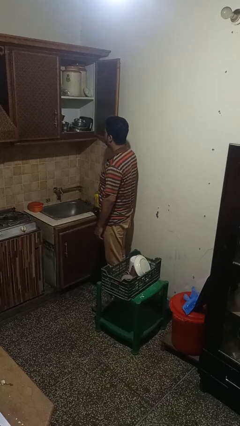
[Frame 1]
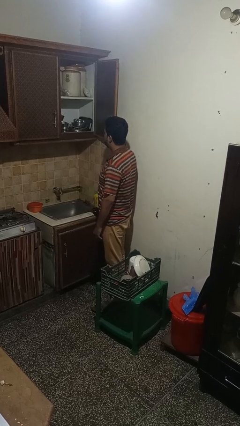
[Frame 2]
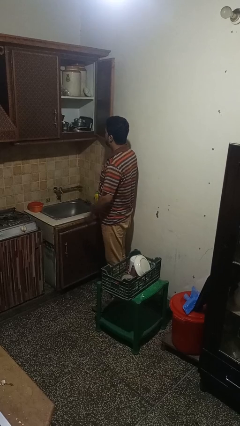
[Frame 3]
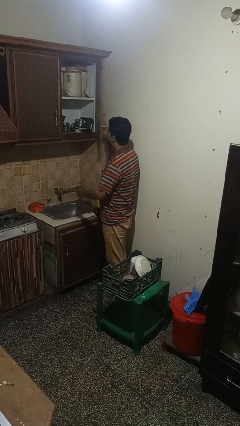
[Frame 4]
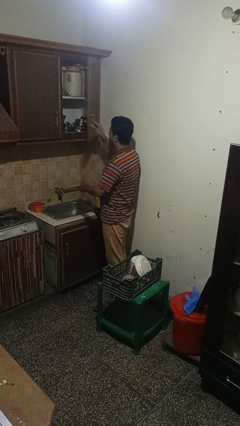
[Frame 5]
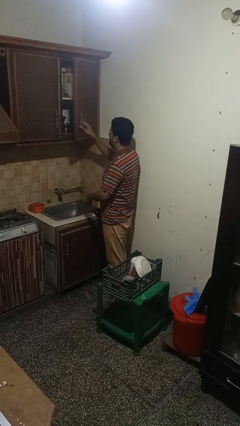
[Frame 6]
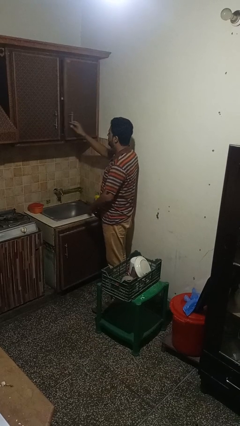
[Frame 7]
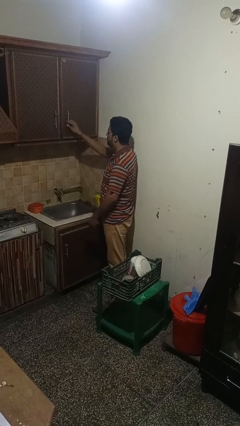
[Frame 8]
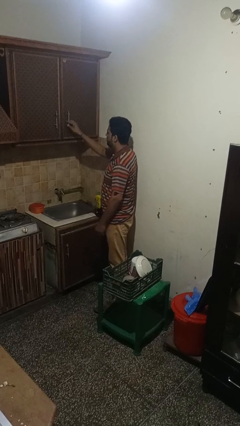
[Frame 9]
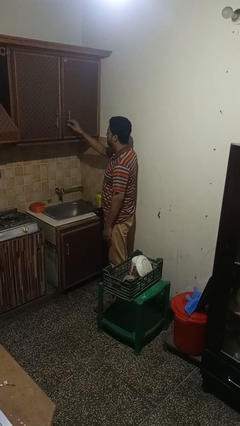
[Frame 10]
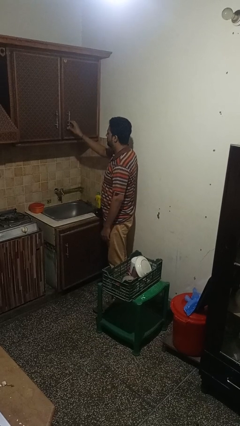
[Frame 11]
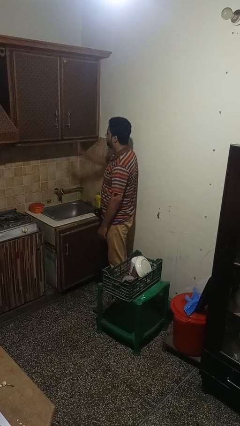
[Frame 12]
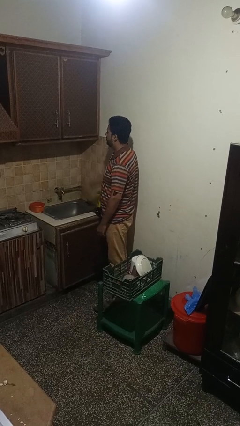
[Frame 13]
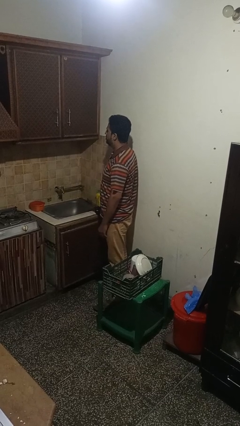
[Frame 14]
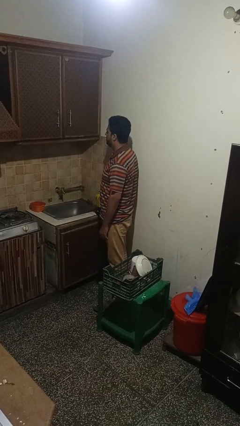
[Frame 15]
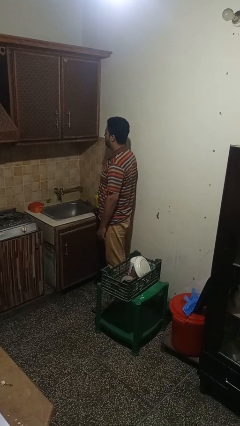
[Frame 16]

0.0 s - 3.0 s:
person closes cabinet

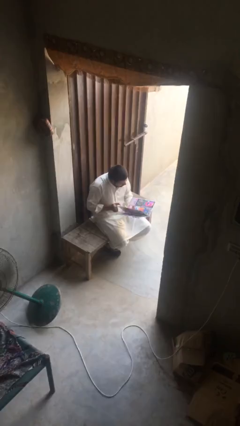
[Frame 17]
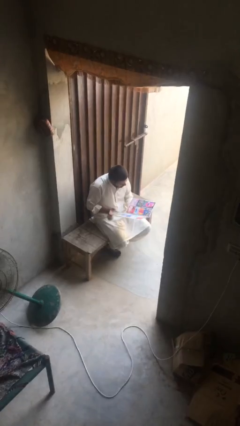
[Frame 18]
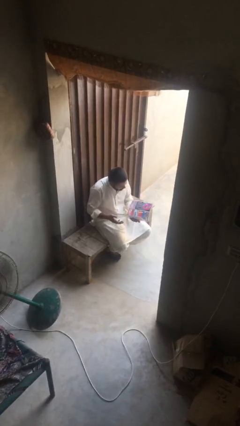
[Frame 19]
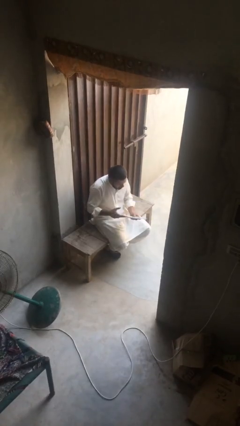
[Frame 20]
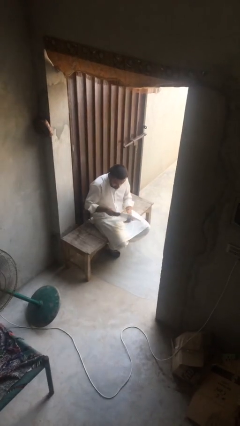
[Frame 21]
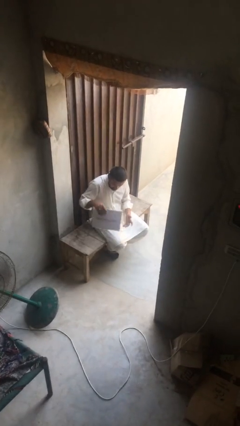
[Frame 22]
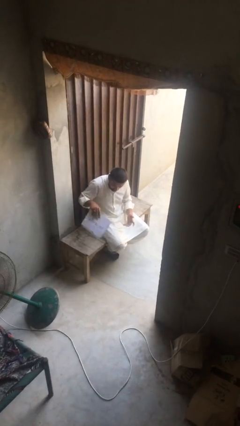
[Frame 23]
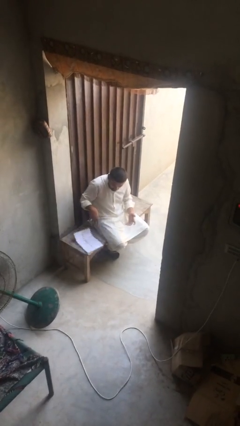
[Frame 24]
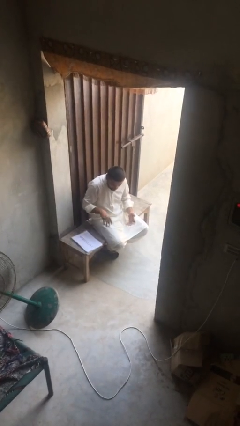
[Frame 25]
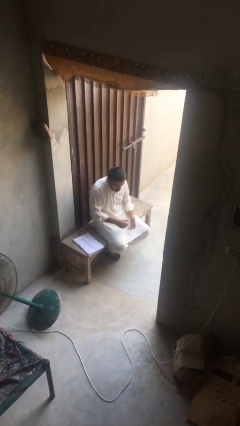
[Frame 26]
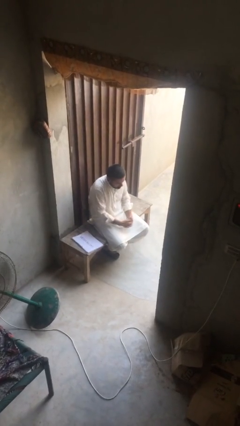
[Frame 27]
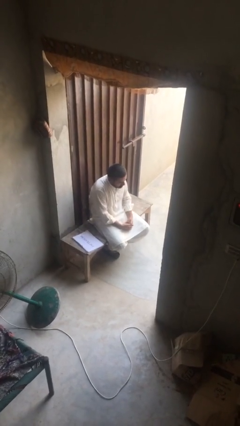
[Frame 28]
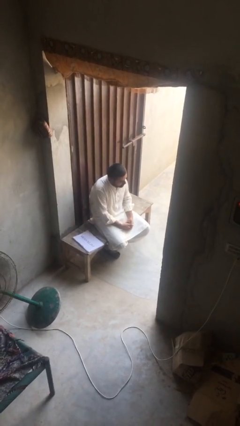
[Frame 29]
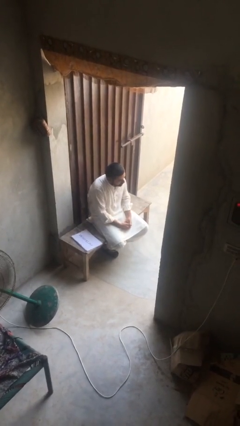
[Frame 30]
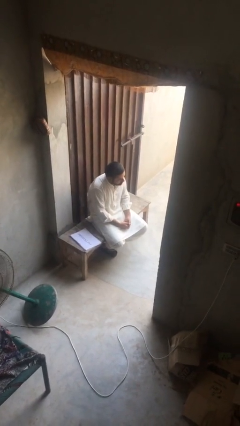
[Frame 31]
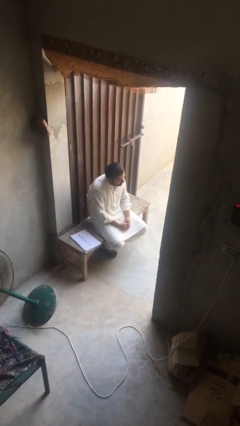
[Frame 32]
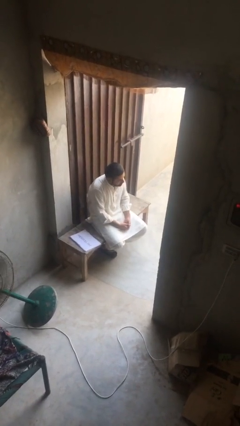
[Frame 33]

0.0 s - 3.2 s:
person puts down object on table

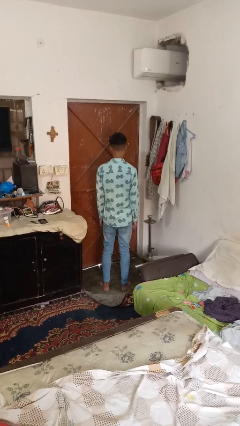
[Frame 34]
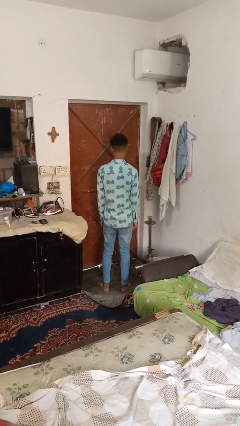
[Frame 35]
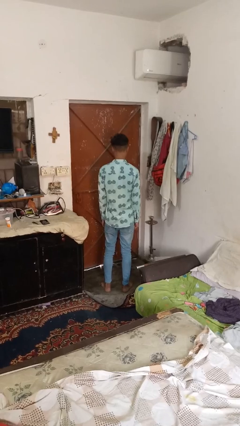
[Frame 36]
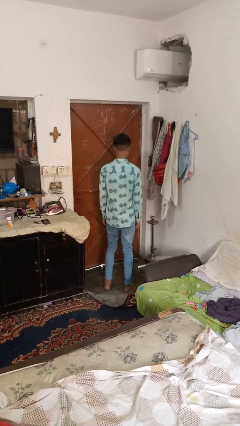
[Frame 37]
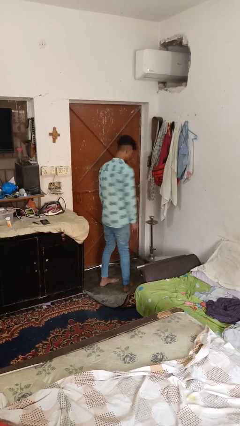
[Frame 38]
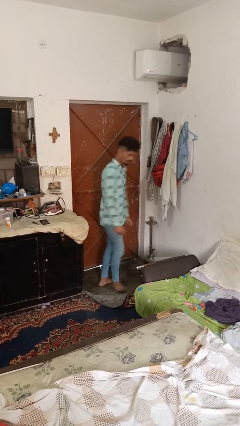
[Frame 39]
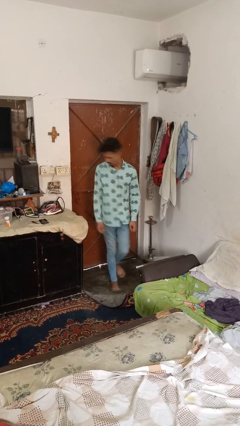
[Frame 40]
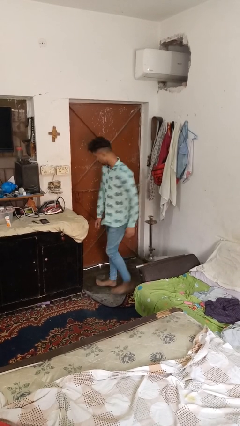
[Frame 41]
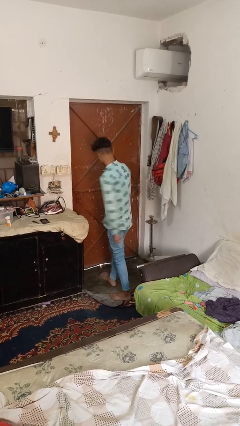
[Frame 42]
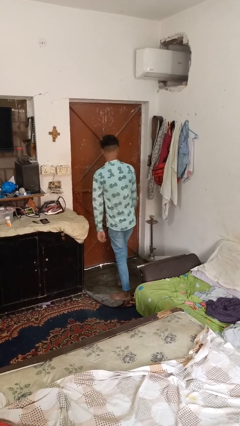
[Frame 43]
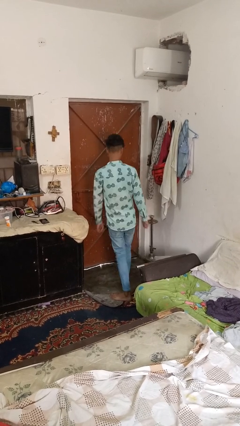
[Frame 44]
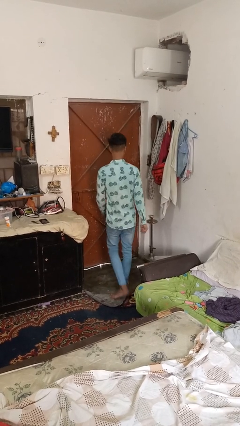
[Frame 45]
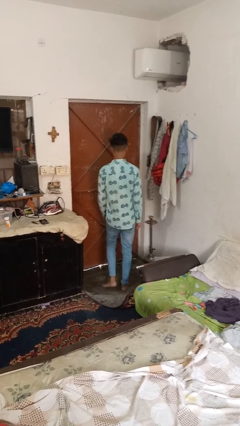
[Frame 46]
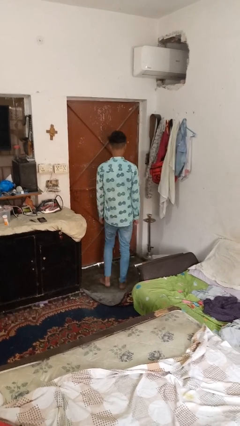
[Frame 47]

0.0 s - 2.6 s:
person twirls

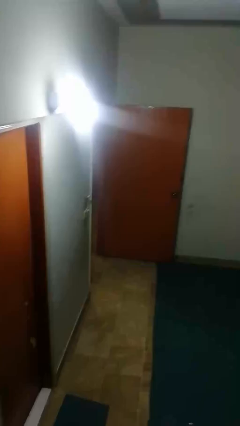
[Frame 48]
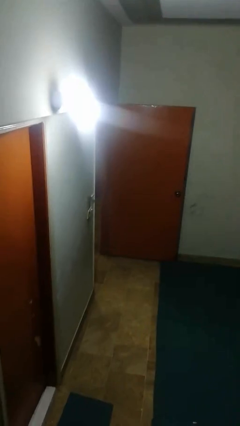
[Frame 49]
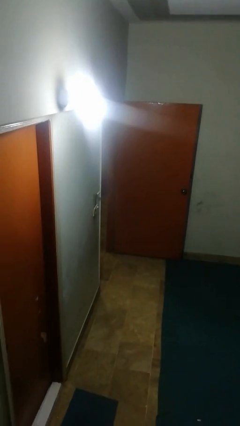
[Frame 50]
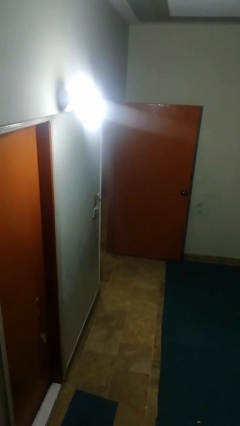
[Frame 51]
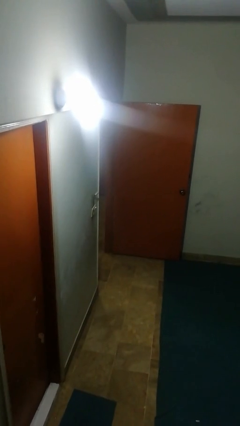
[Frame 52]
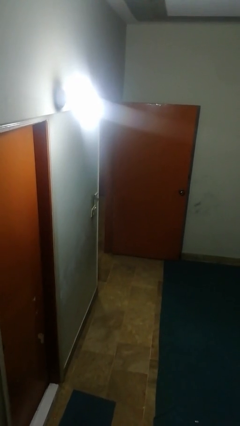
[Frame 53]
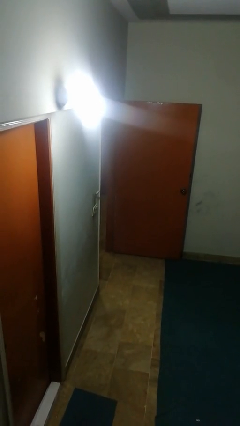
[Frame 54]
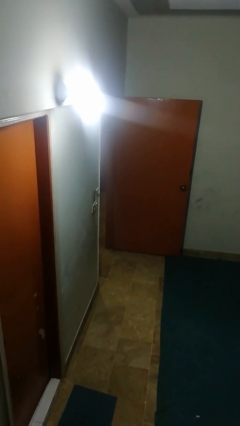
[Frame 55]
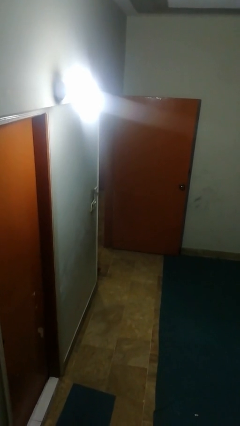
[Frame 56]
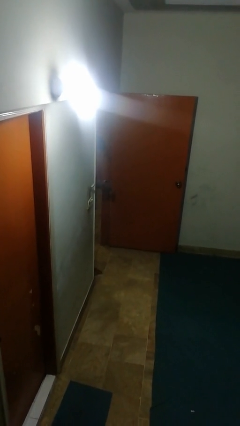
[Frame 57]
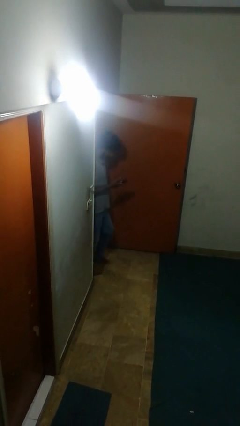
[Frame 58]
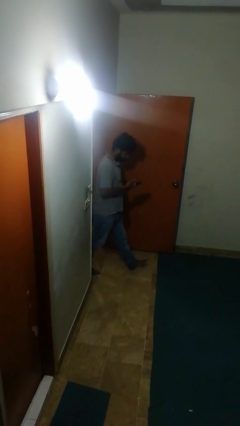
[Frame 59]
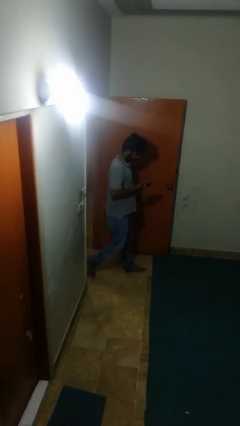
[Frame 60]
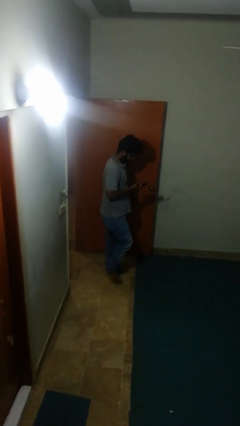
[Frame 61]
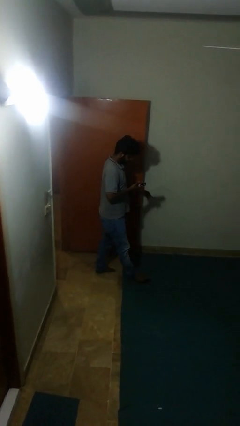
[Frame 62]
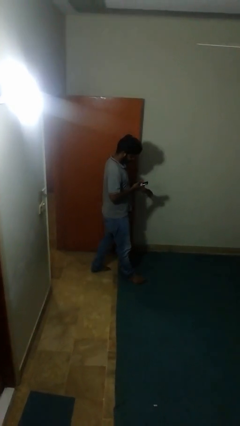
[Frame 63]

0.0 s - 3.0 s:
person enters scene through structure

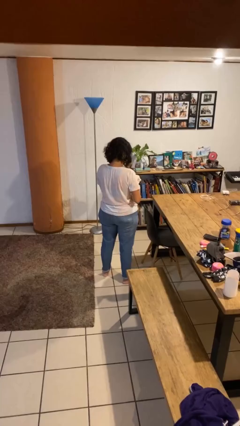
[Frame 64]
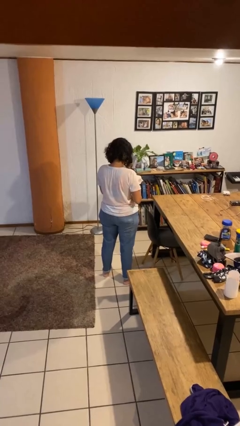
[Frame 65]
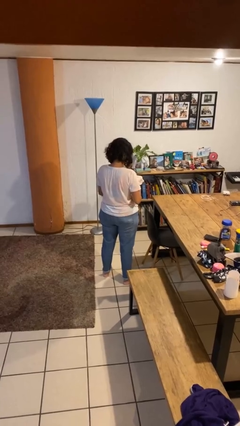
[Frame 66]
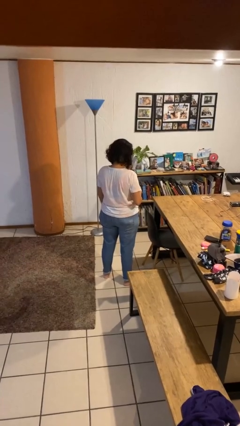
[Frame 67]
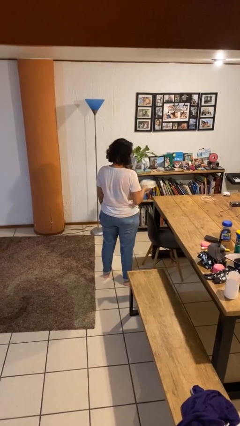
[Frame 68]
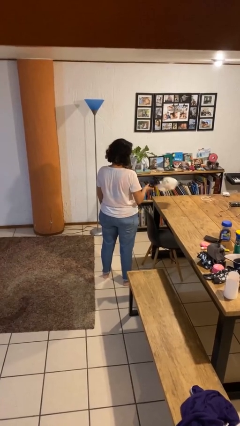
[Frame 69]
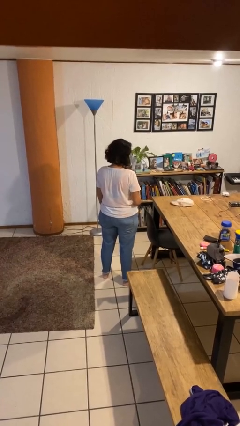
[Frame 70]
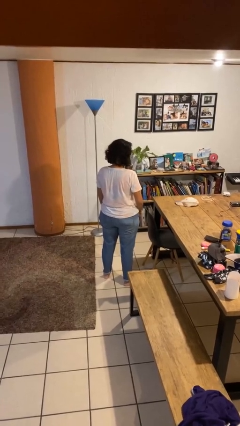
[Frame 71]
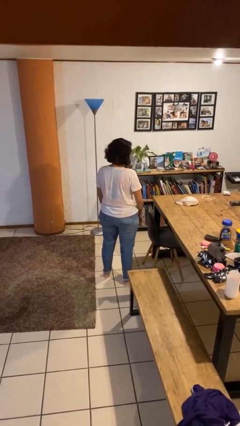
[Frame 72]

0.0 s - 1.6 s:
person throws object on table

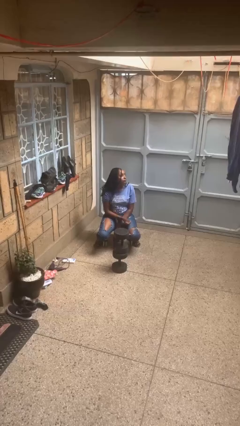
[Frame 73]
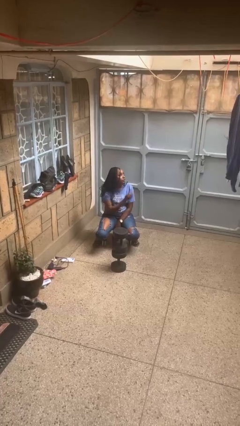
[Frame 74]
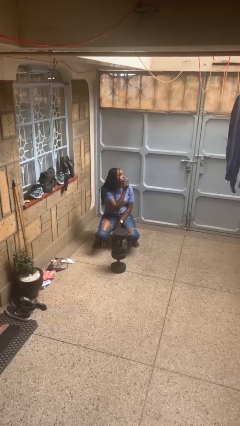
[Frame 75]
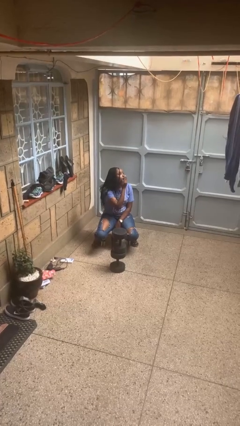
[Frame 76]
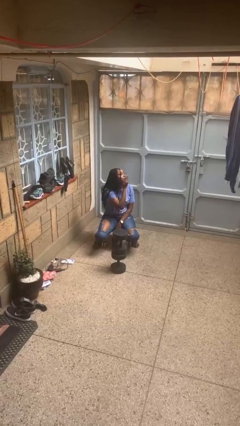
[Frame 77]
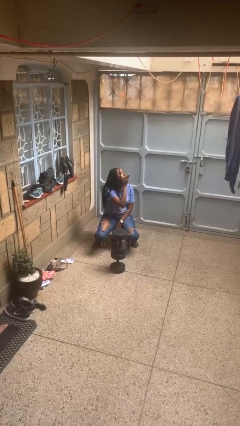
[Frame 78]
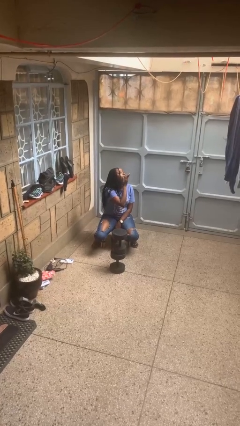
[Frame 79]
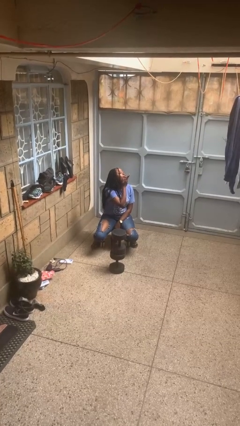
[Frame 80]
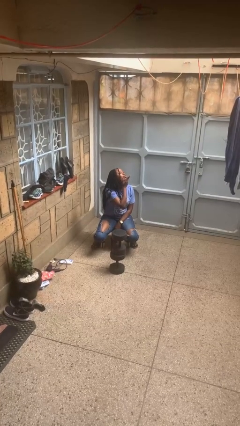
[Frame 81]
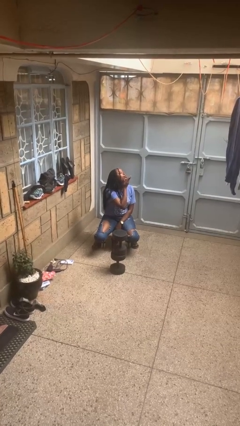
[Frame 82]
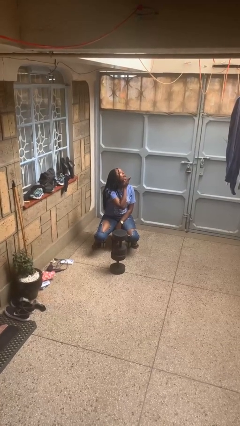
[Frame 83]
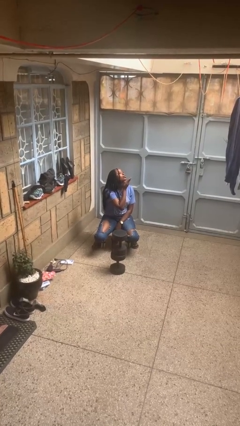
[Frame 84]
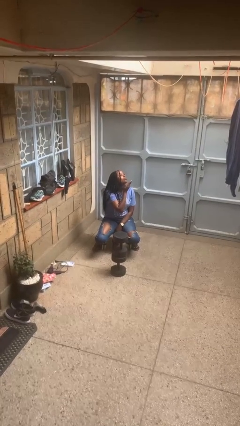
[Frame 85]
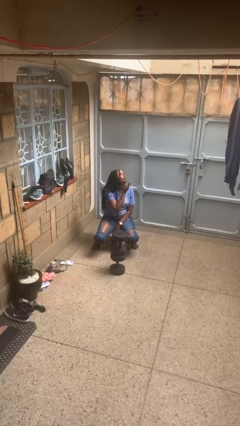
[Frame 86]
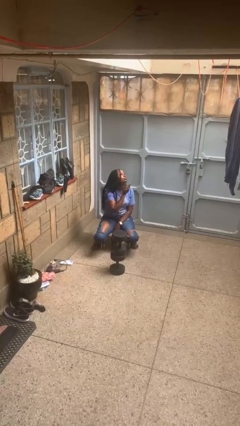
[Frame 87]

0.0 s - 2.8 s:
person gestures blow kiss

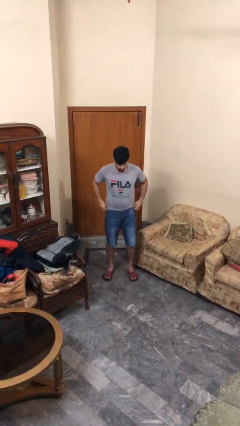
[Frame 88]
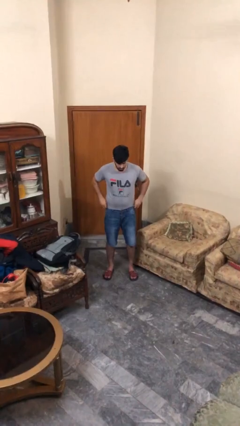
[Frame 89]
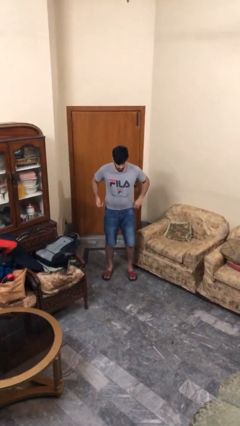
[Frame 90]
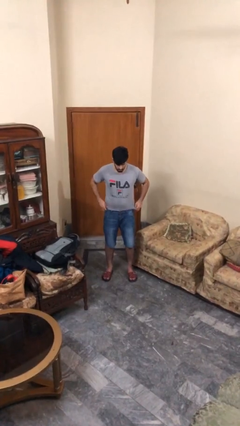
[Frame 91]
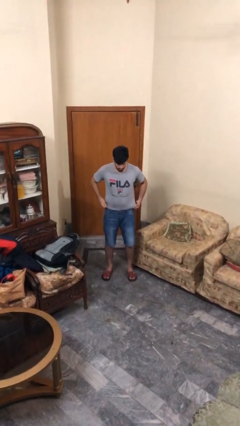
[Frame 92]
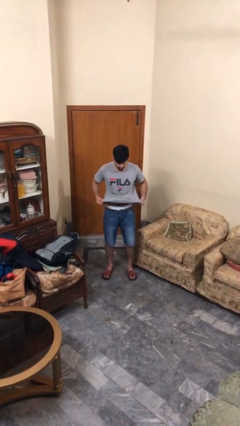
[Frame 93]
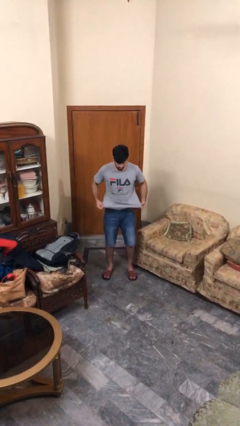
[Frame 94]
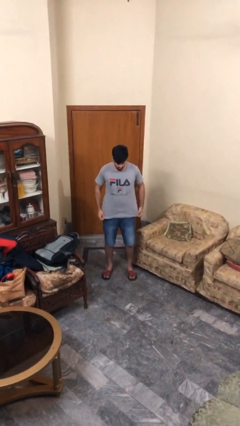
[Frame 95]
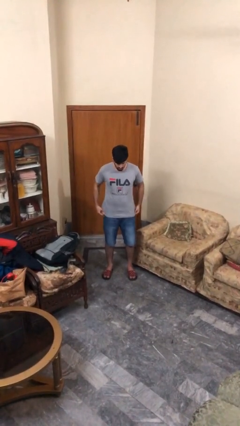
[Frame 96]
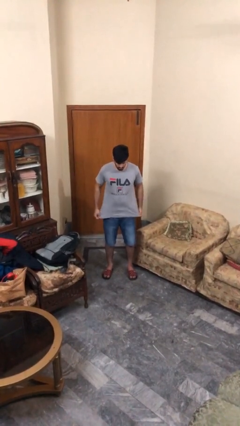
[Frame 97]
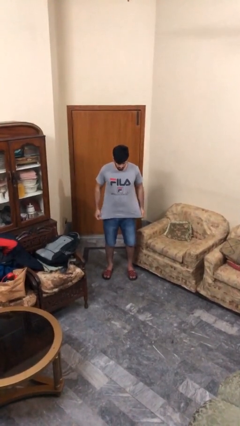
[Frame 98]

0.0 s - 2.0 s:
person untucks shirt
